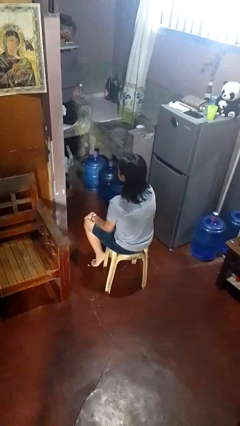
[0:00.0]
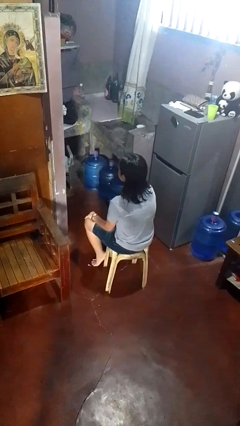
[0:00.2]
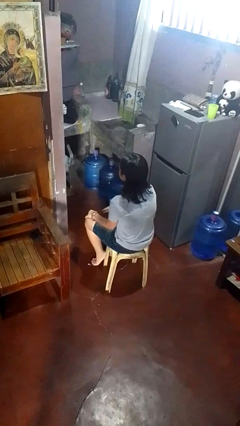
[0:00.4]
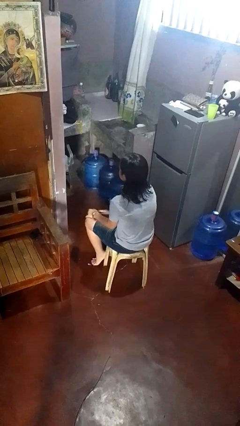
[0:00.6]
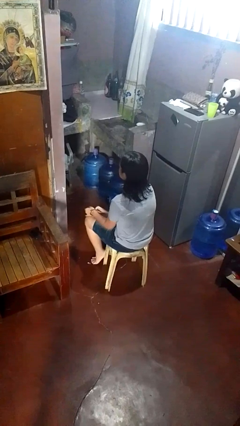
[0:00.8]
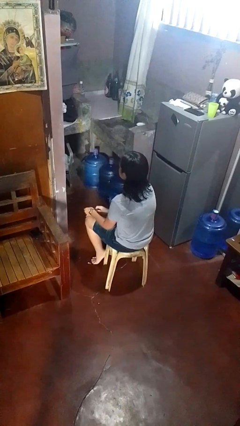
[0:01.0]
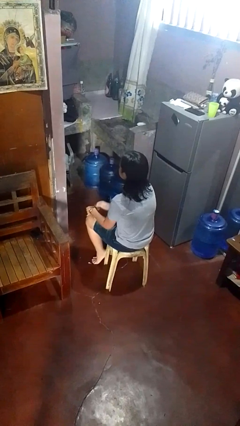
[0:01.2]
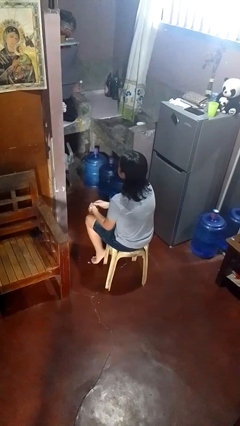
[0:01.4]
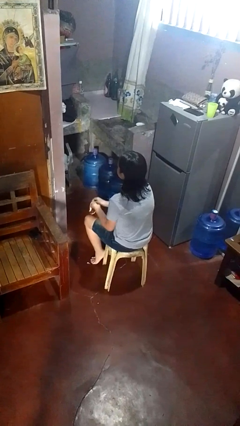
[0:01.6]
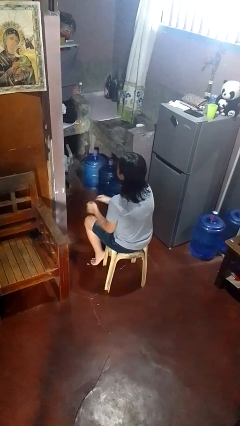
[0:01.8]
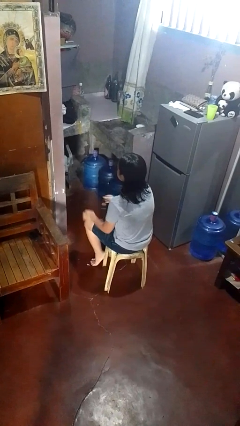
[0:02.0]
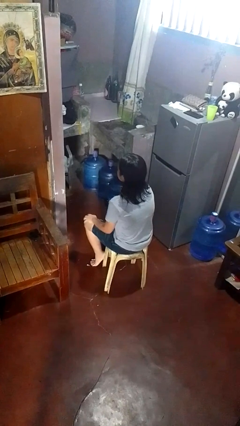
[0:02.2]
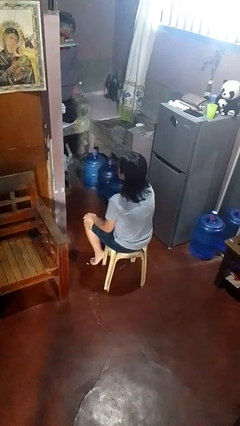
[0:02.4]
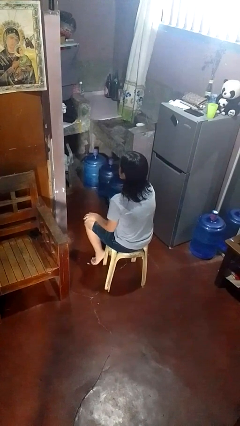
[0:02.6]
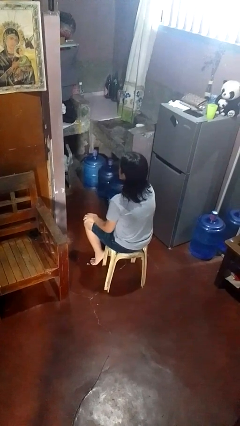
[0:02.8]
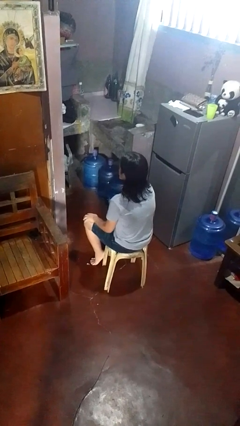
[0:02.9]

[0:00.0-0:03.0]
person takes off wristwatch

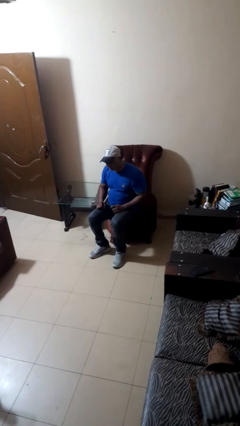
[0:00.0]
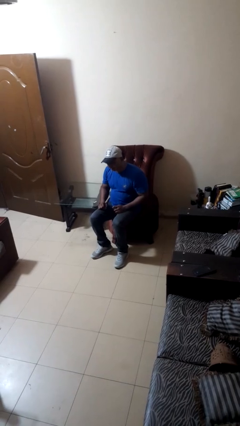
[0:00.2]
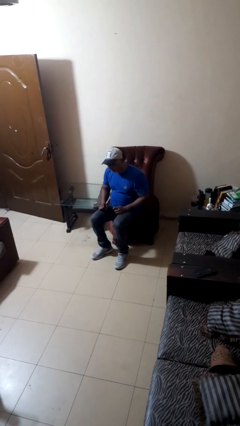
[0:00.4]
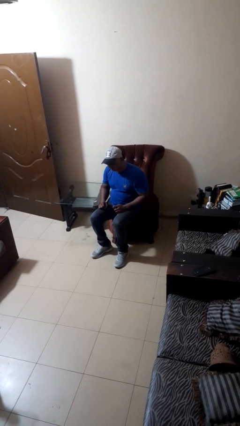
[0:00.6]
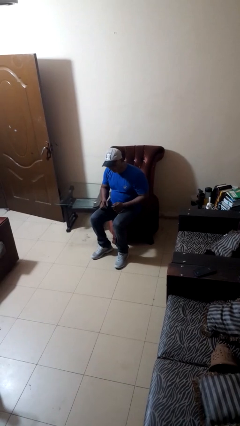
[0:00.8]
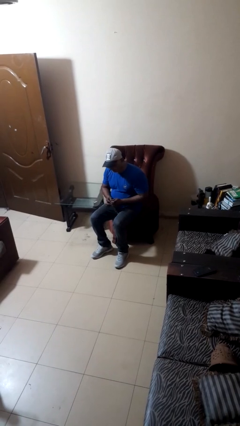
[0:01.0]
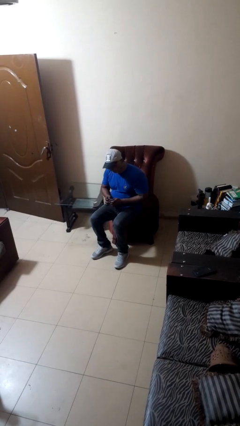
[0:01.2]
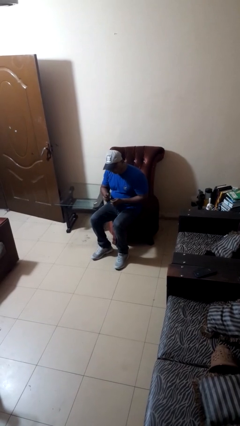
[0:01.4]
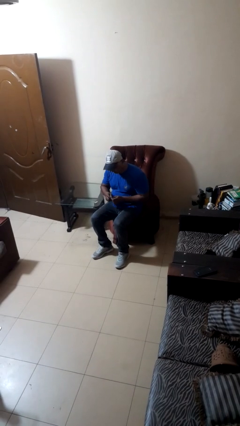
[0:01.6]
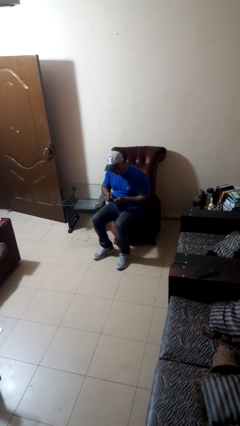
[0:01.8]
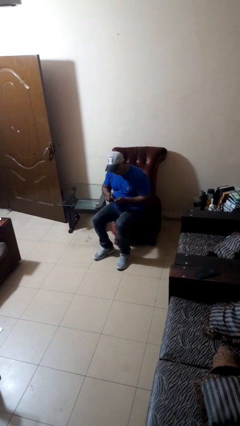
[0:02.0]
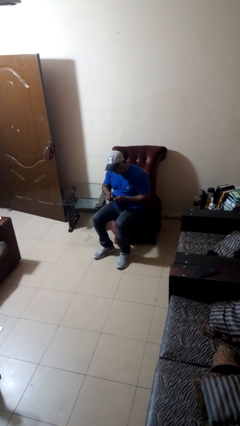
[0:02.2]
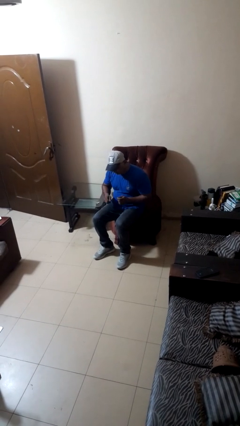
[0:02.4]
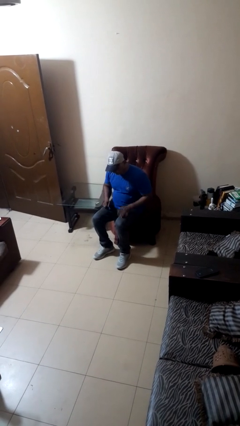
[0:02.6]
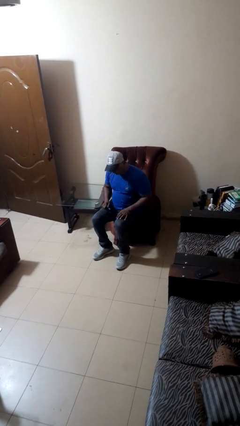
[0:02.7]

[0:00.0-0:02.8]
person files fingernails

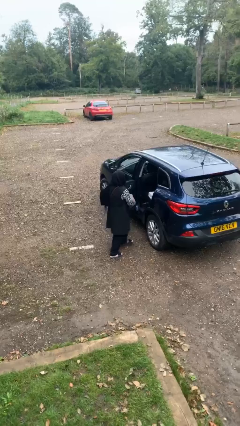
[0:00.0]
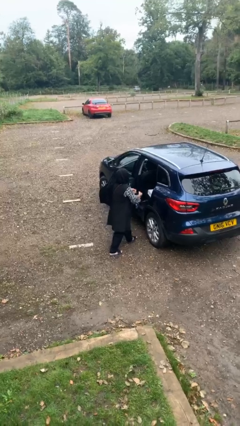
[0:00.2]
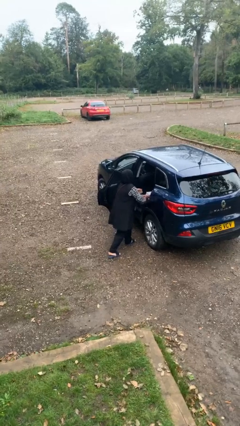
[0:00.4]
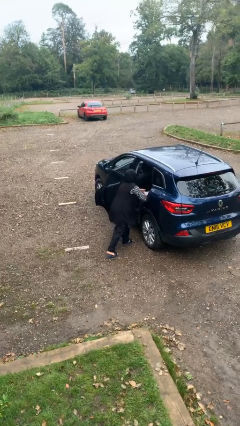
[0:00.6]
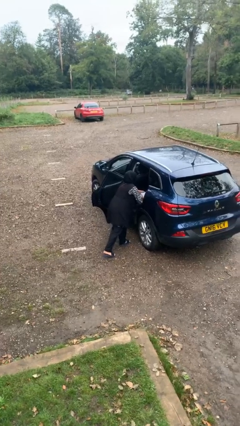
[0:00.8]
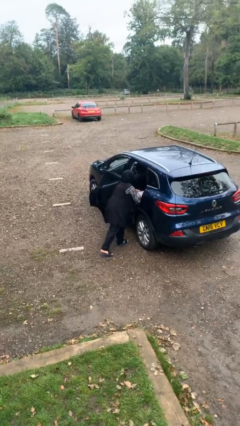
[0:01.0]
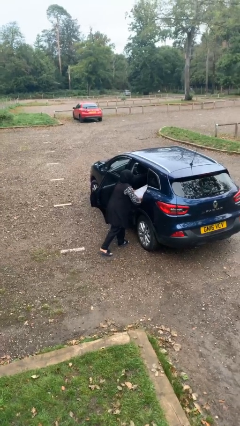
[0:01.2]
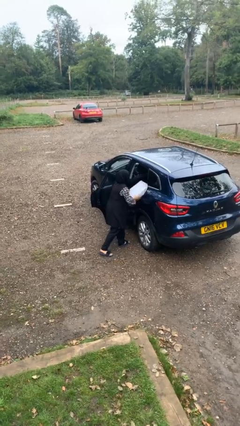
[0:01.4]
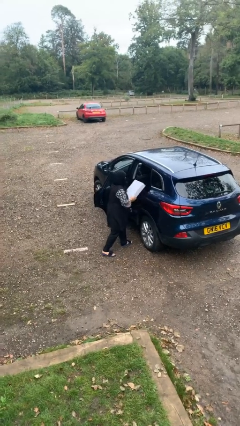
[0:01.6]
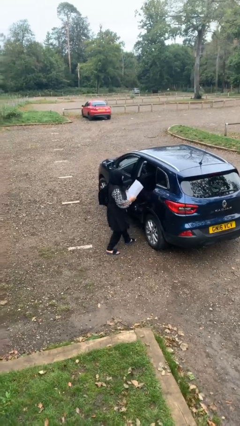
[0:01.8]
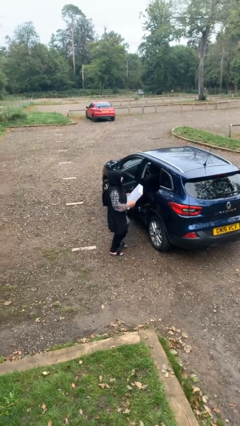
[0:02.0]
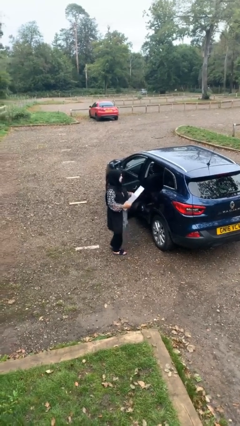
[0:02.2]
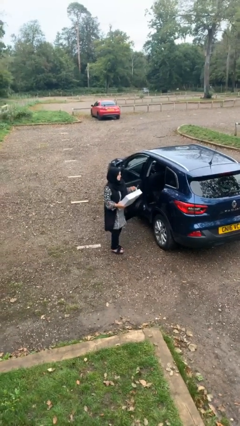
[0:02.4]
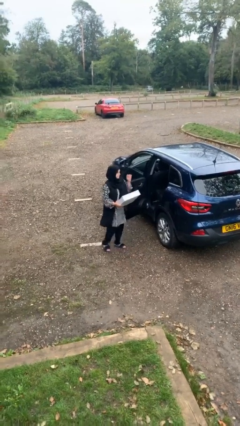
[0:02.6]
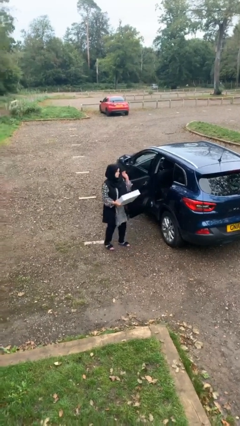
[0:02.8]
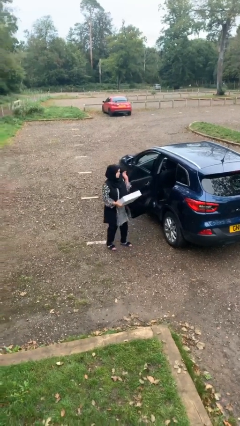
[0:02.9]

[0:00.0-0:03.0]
person unloads car

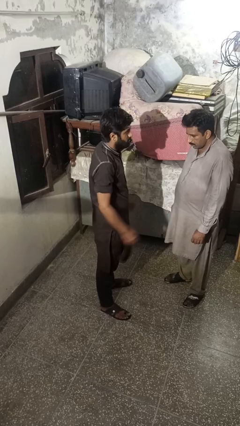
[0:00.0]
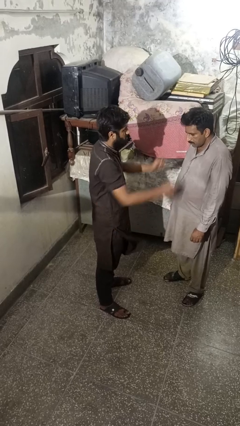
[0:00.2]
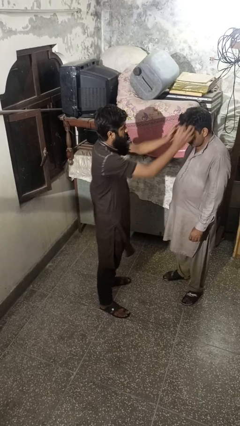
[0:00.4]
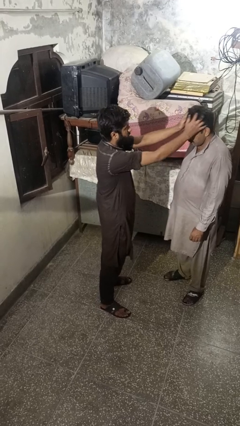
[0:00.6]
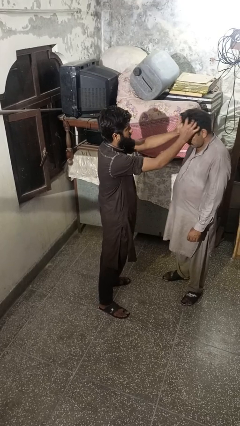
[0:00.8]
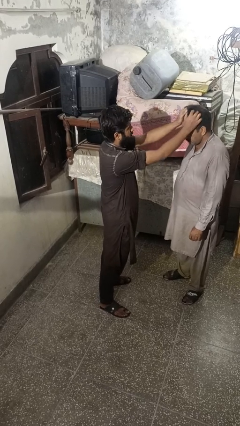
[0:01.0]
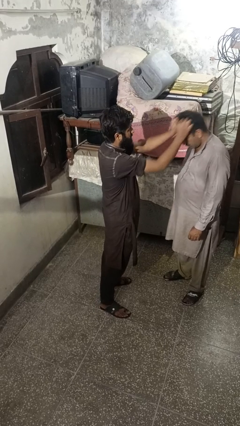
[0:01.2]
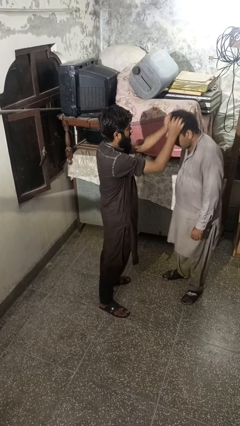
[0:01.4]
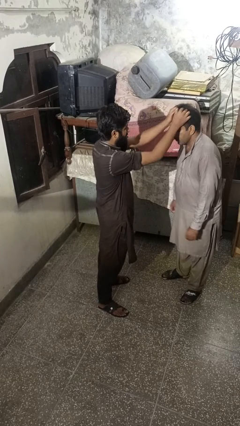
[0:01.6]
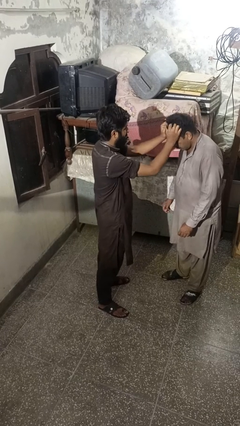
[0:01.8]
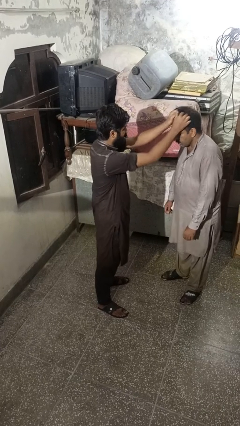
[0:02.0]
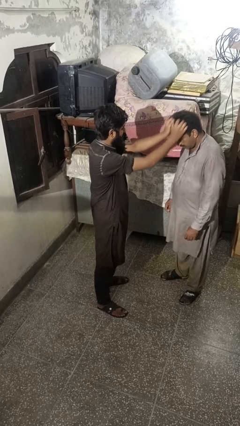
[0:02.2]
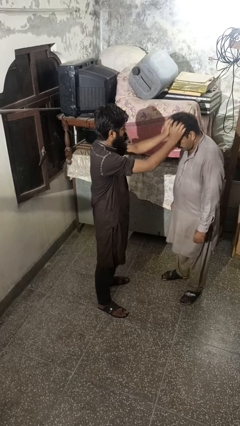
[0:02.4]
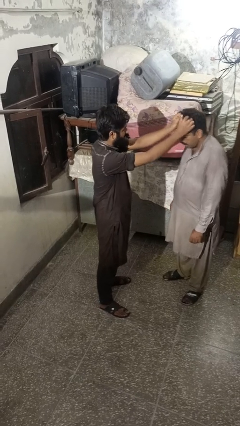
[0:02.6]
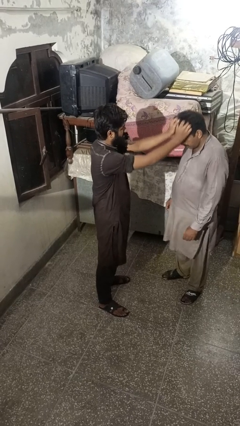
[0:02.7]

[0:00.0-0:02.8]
person grabs person by hair

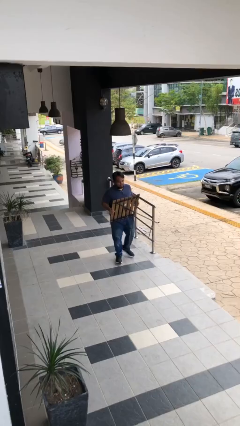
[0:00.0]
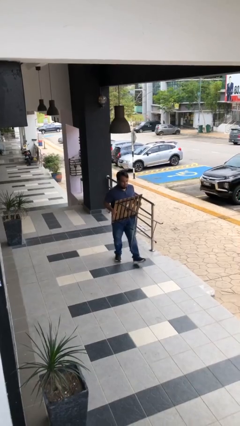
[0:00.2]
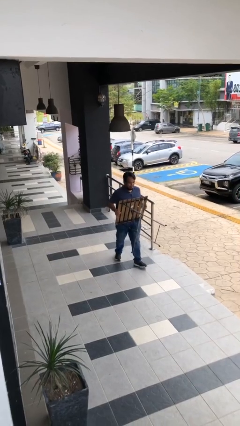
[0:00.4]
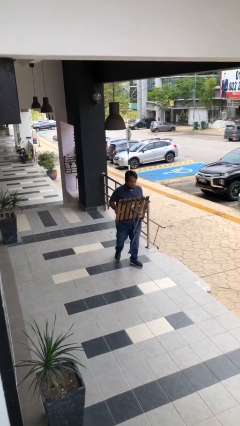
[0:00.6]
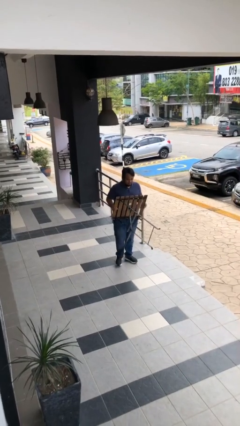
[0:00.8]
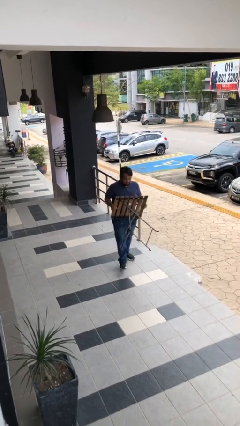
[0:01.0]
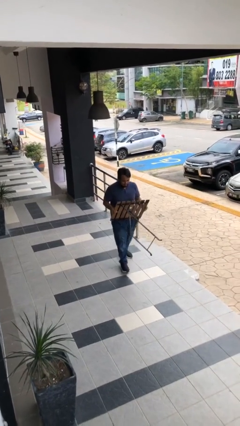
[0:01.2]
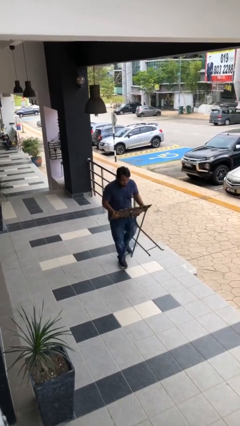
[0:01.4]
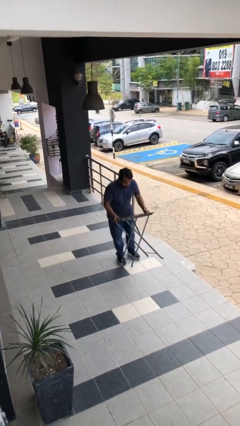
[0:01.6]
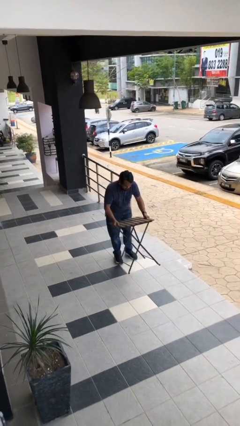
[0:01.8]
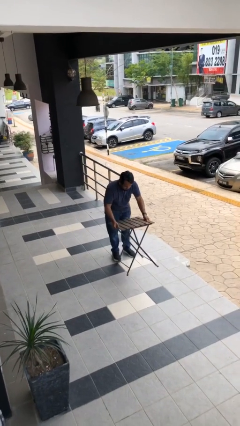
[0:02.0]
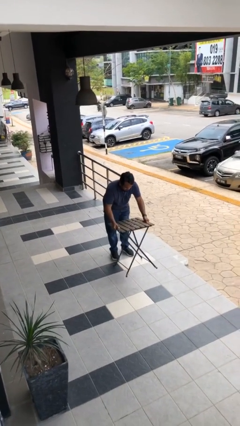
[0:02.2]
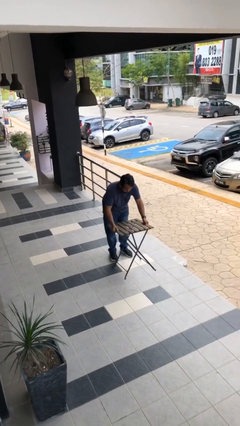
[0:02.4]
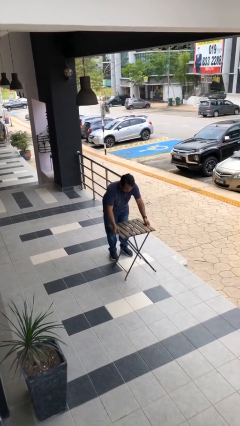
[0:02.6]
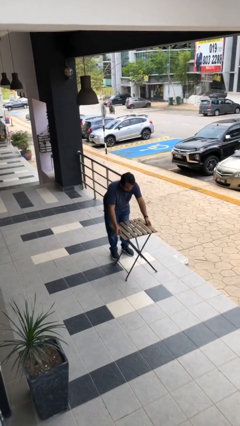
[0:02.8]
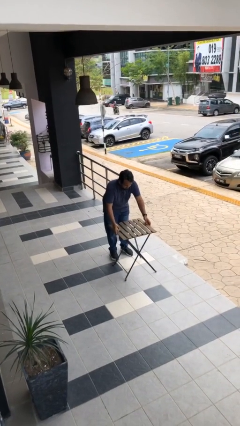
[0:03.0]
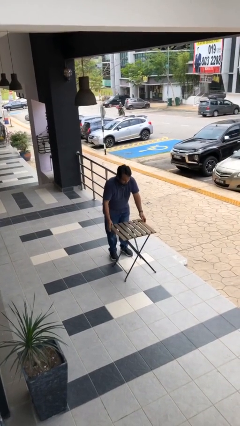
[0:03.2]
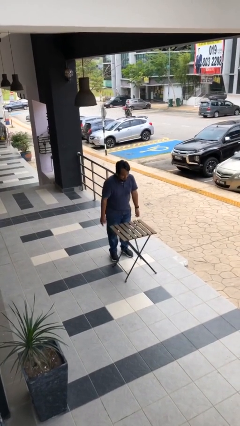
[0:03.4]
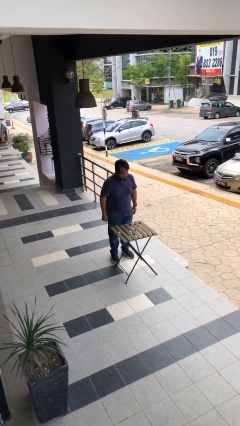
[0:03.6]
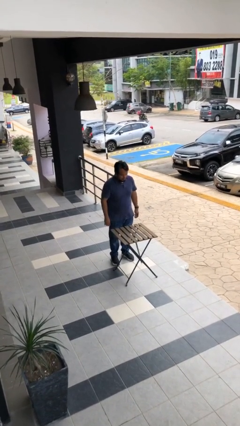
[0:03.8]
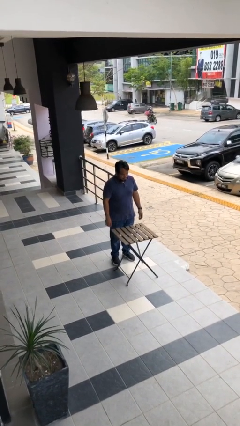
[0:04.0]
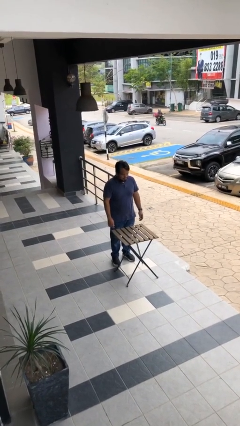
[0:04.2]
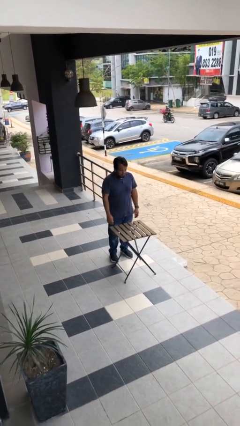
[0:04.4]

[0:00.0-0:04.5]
person puts down object on floor

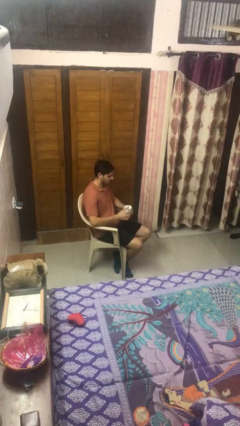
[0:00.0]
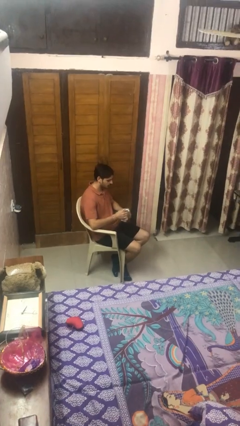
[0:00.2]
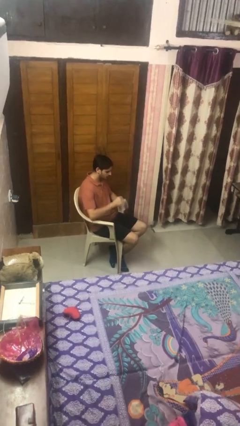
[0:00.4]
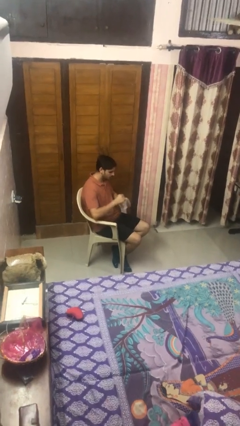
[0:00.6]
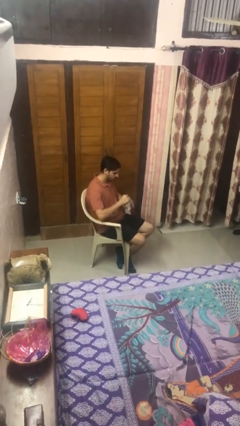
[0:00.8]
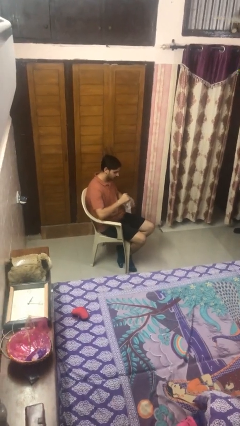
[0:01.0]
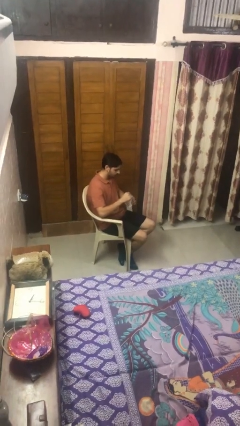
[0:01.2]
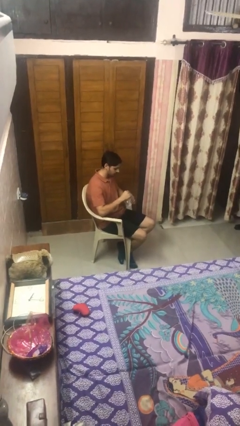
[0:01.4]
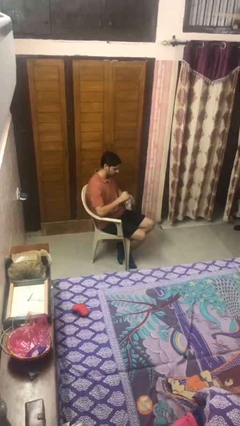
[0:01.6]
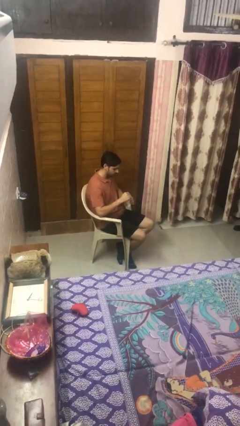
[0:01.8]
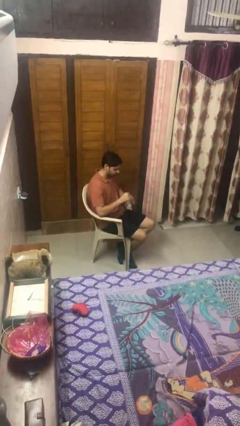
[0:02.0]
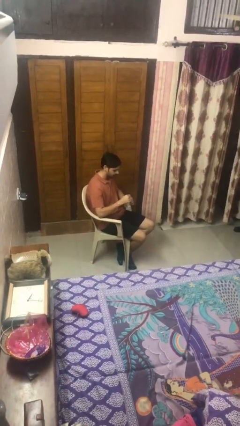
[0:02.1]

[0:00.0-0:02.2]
person stirs mug
